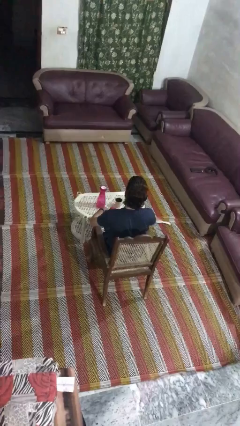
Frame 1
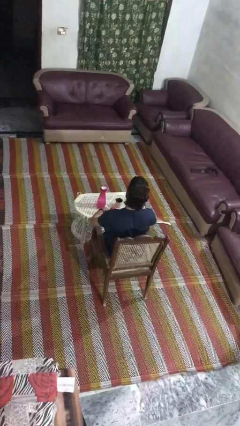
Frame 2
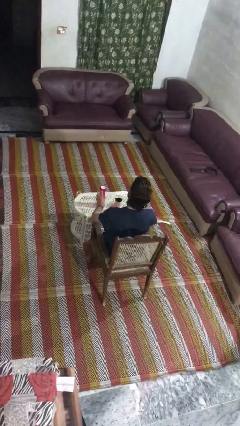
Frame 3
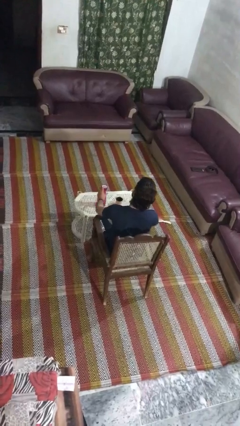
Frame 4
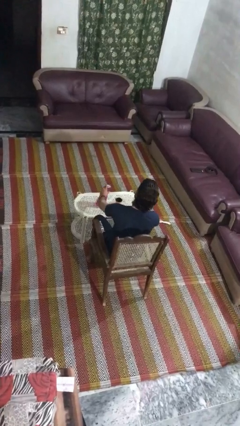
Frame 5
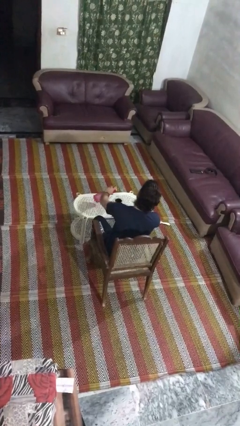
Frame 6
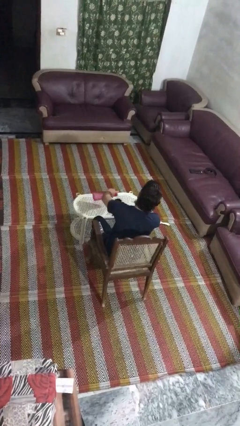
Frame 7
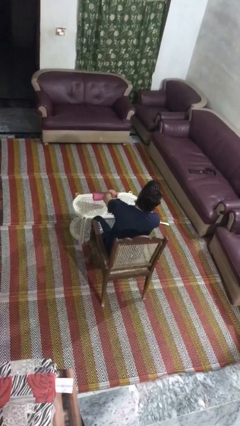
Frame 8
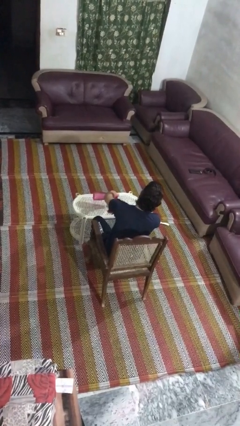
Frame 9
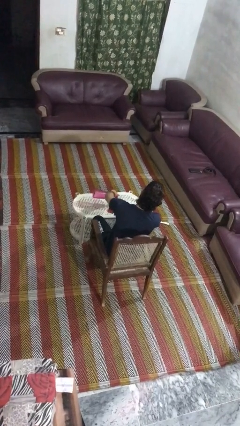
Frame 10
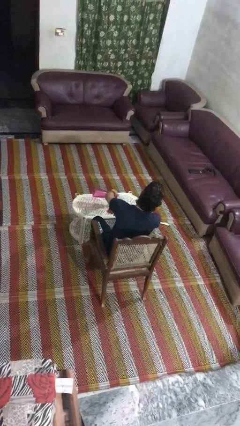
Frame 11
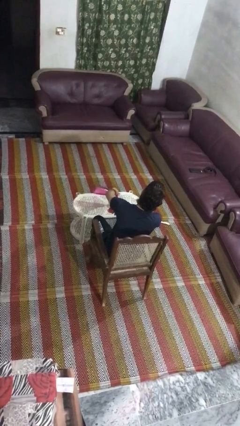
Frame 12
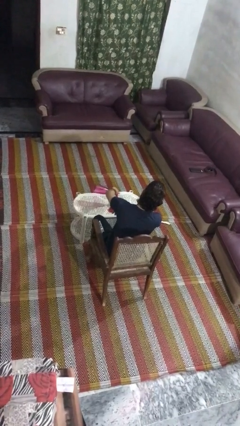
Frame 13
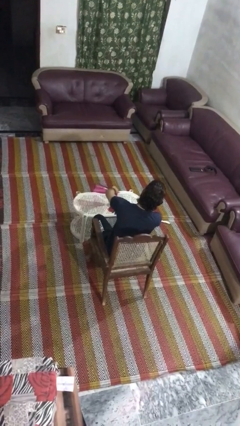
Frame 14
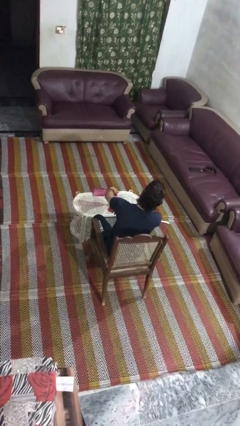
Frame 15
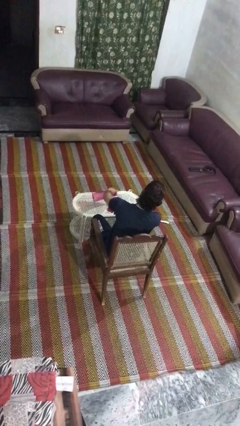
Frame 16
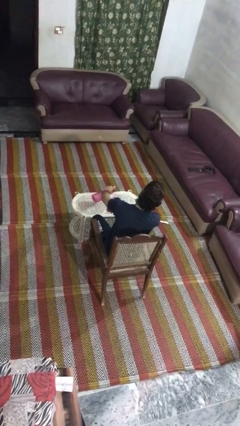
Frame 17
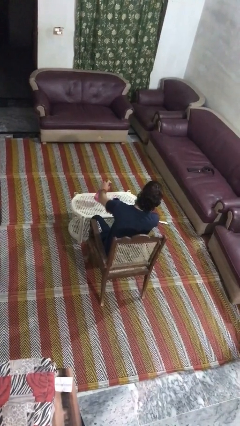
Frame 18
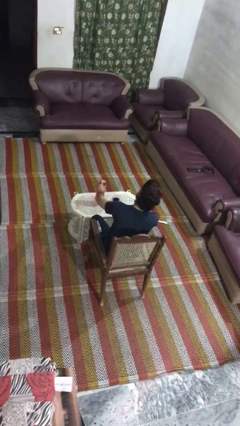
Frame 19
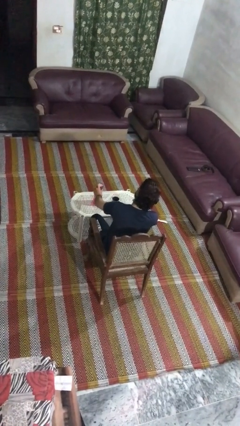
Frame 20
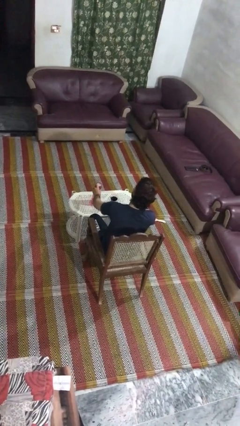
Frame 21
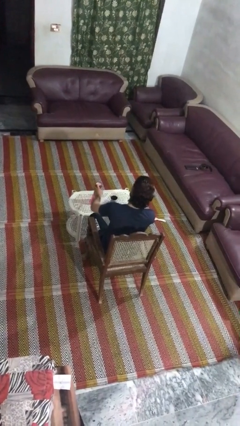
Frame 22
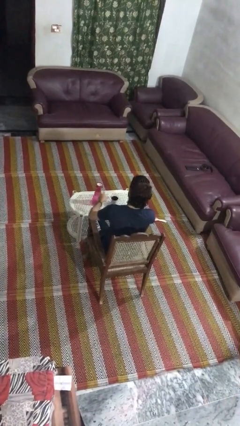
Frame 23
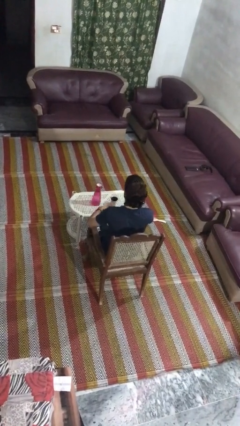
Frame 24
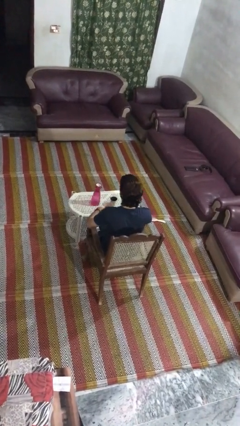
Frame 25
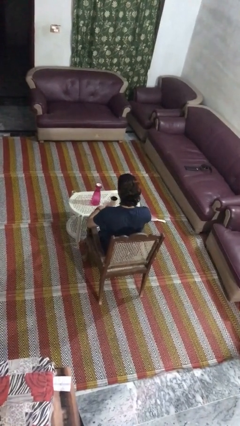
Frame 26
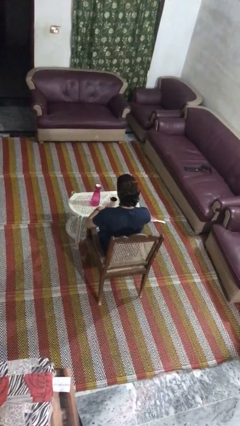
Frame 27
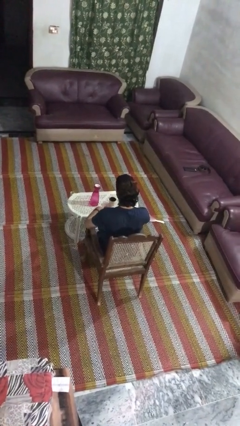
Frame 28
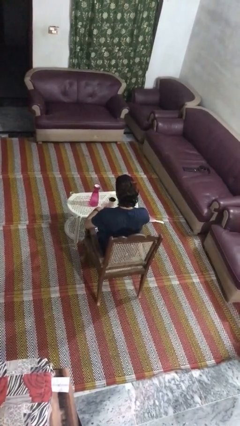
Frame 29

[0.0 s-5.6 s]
person pours liquid into cup

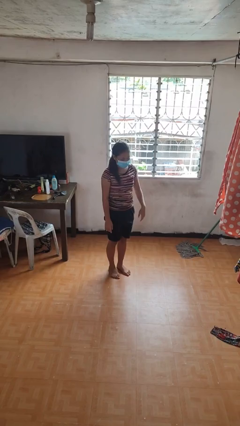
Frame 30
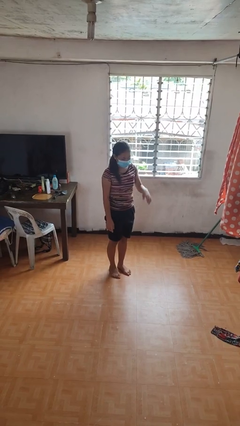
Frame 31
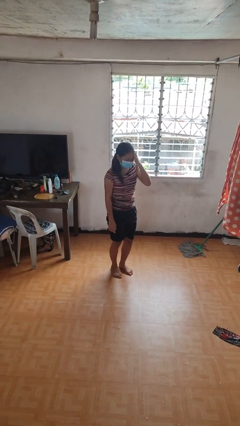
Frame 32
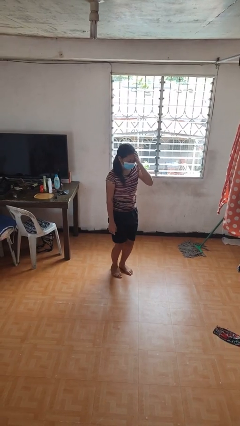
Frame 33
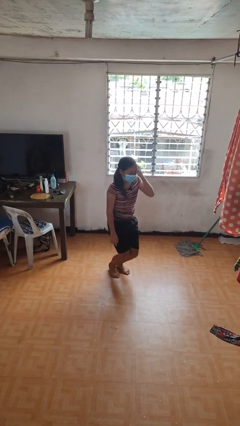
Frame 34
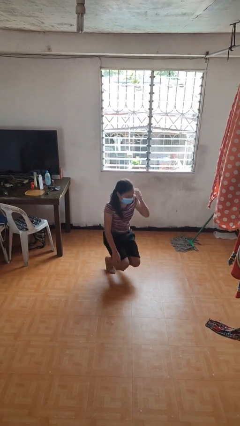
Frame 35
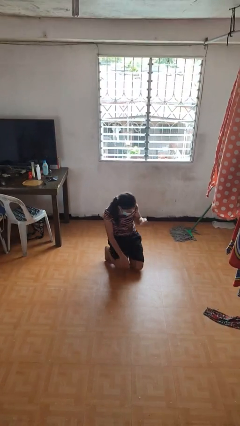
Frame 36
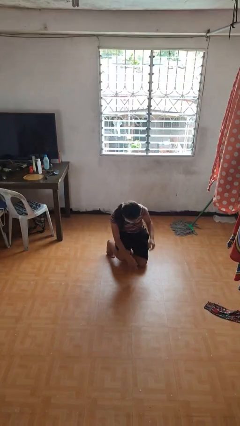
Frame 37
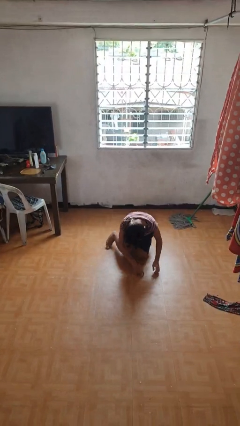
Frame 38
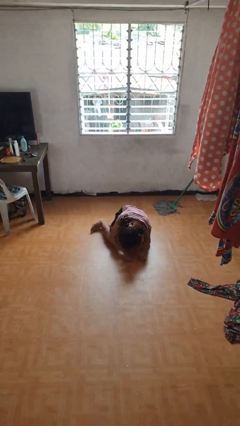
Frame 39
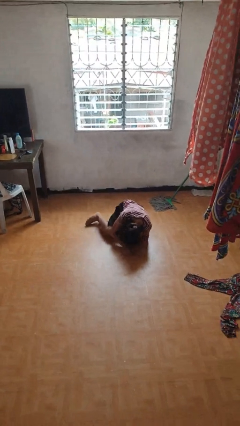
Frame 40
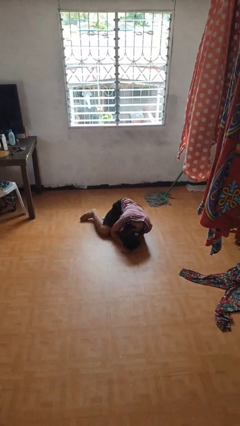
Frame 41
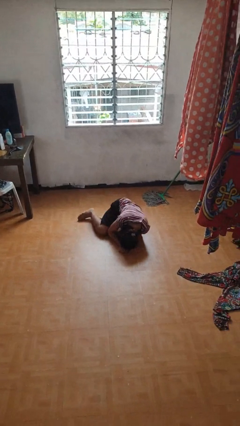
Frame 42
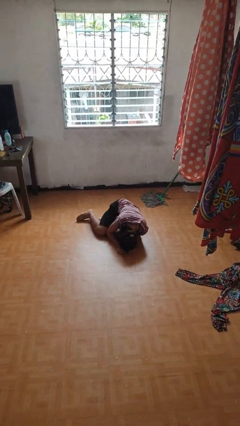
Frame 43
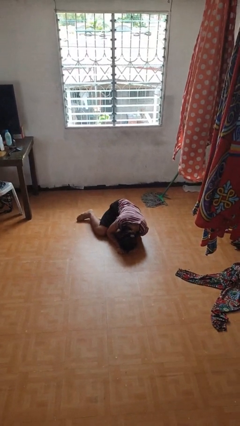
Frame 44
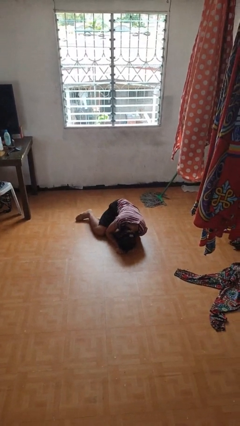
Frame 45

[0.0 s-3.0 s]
person falls while standing

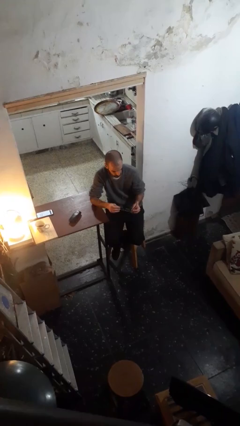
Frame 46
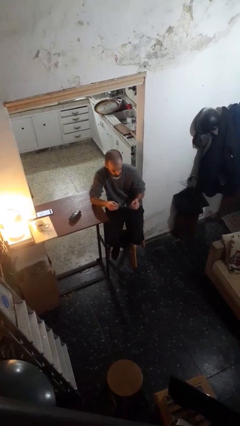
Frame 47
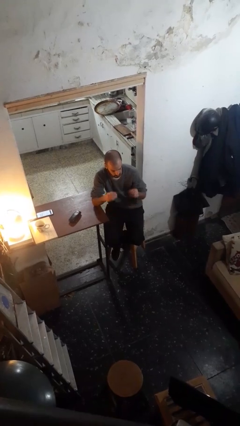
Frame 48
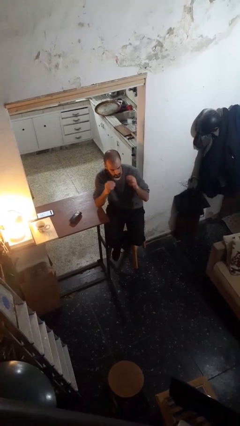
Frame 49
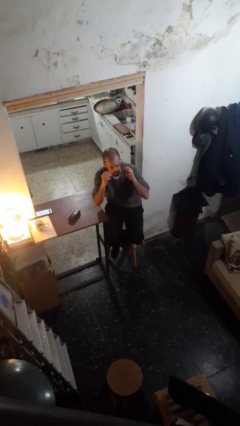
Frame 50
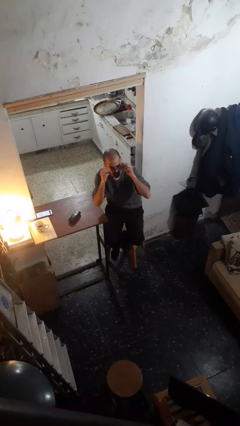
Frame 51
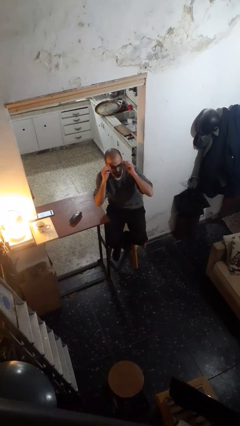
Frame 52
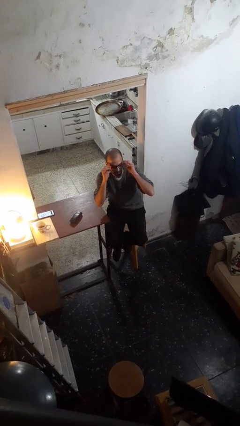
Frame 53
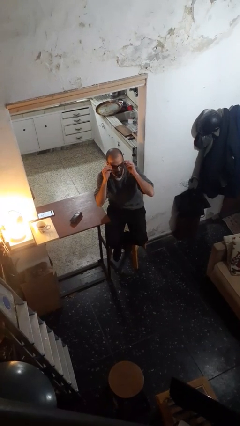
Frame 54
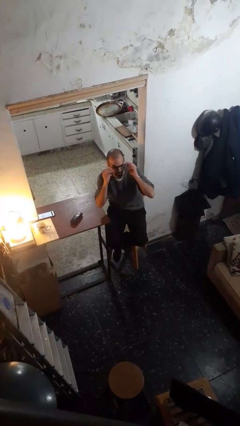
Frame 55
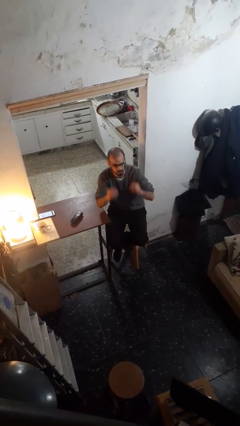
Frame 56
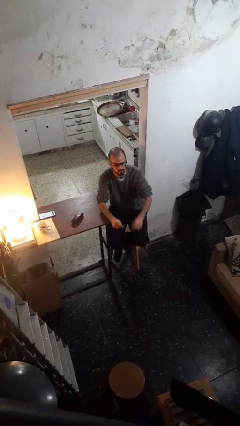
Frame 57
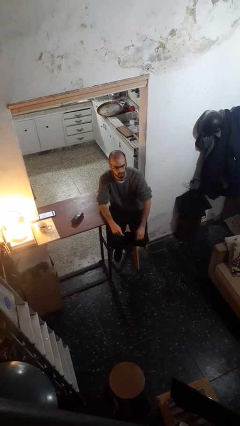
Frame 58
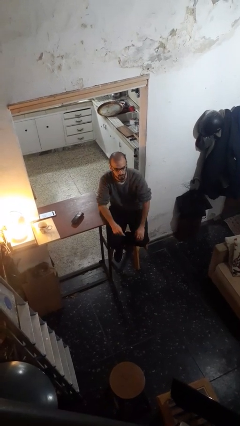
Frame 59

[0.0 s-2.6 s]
person puts on glasses

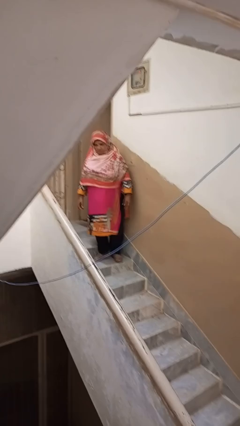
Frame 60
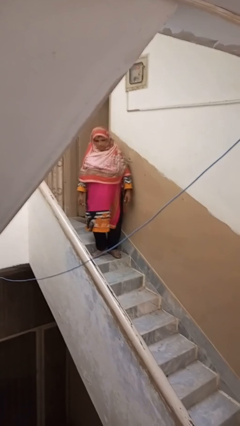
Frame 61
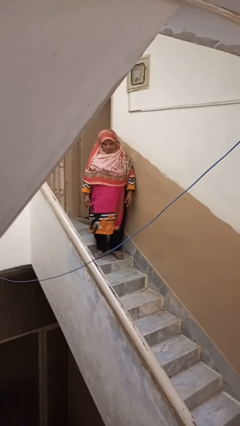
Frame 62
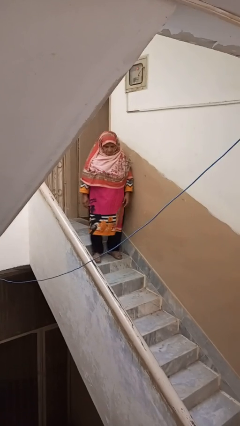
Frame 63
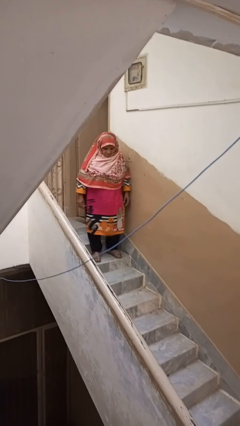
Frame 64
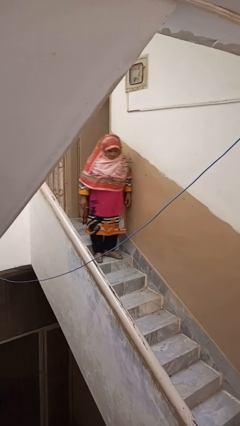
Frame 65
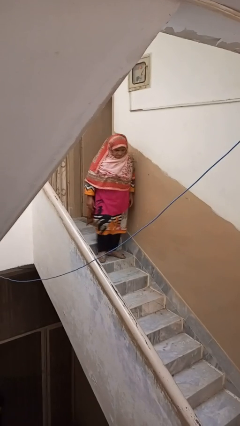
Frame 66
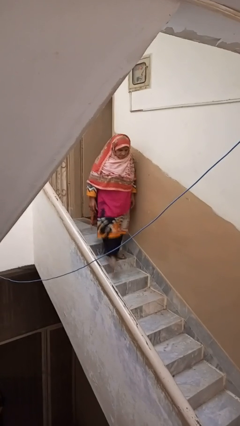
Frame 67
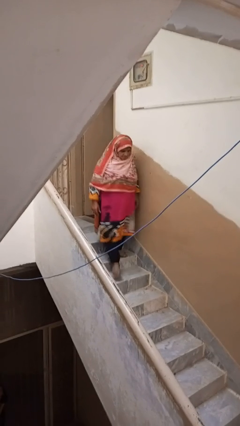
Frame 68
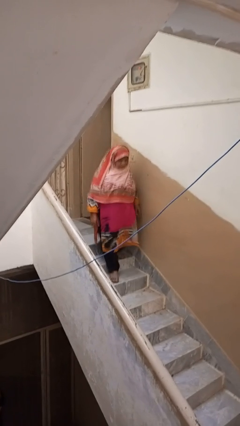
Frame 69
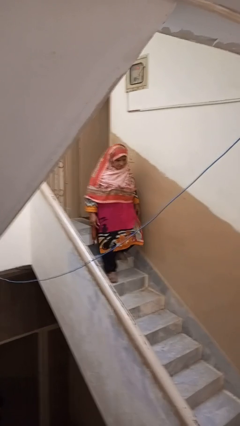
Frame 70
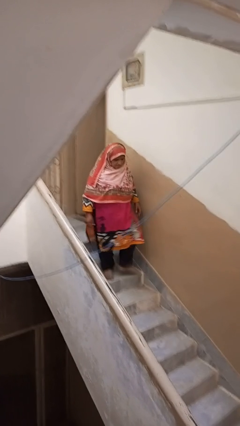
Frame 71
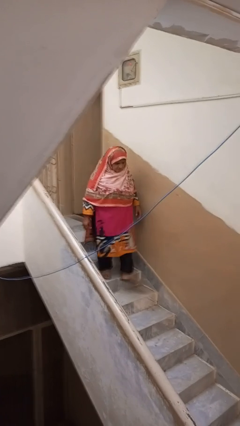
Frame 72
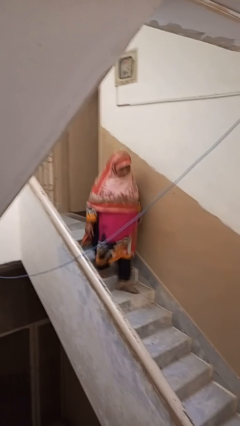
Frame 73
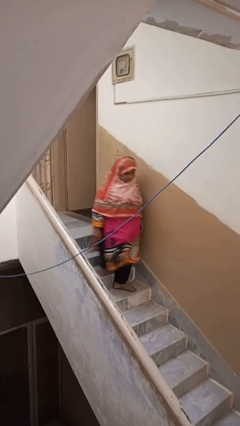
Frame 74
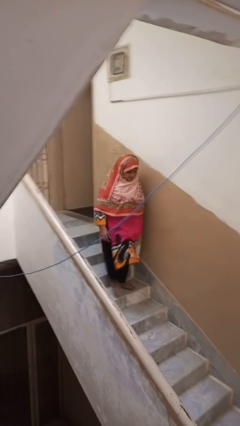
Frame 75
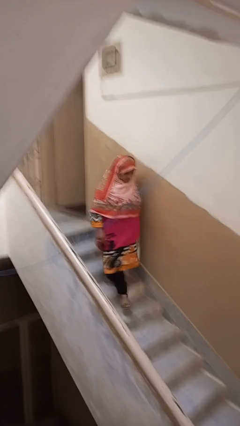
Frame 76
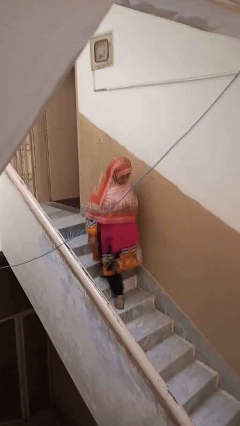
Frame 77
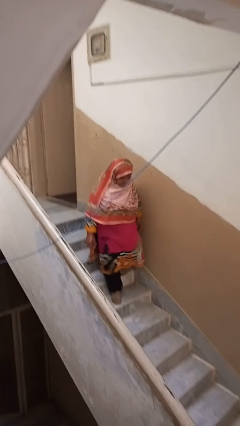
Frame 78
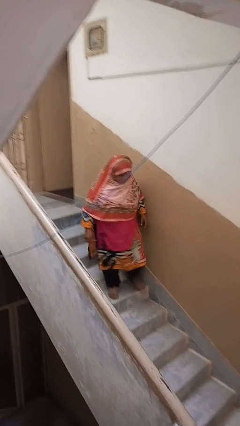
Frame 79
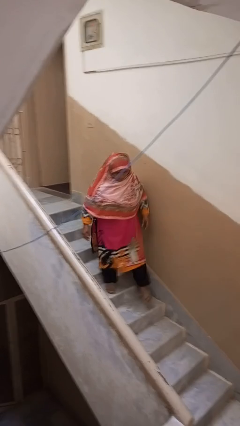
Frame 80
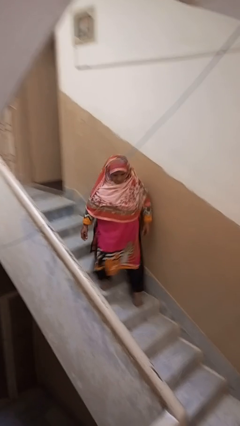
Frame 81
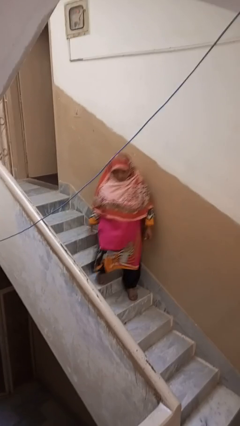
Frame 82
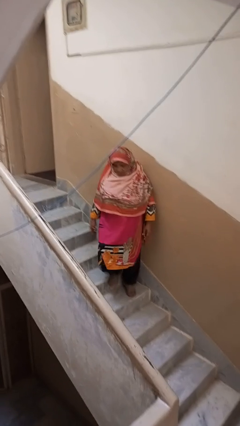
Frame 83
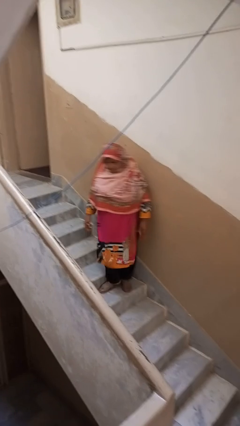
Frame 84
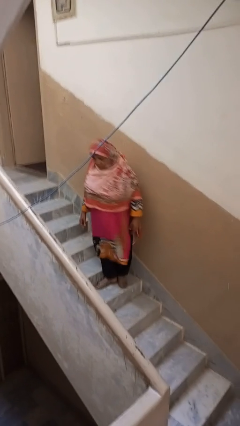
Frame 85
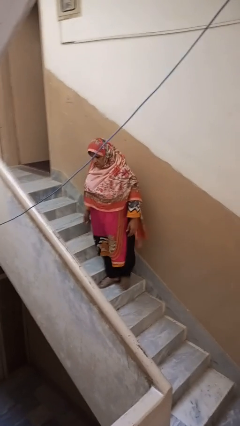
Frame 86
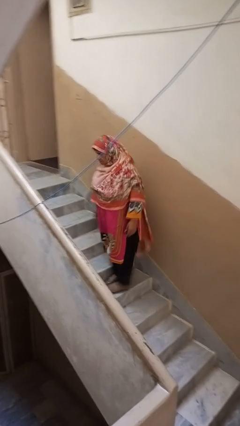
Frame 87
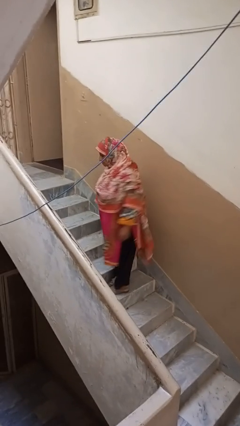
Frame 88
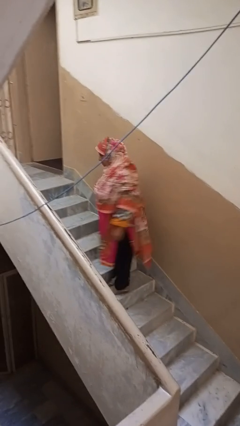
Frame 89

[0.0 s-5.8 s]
person climbs down stairs

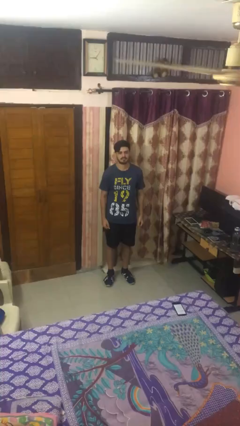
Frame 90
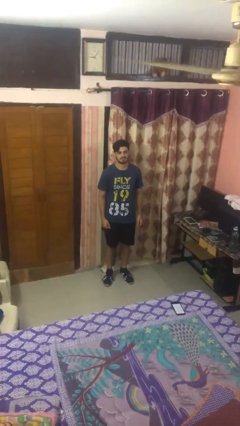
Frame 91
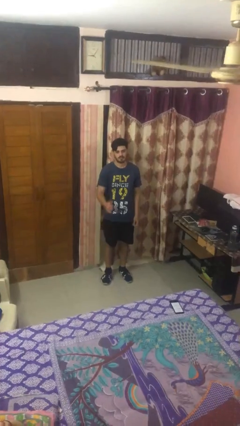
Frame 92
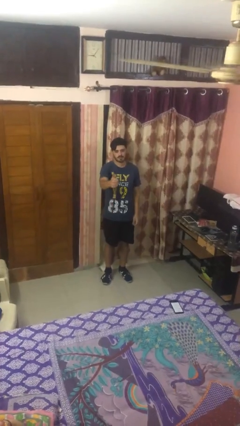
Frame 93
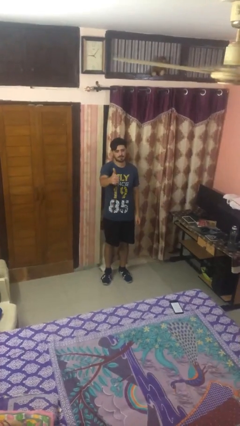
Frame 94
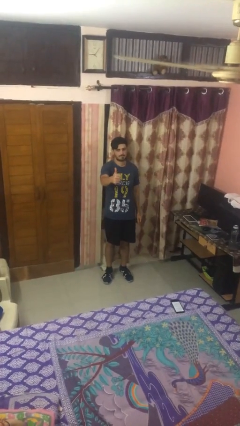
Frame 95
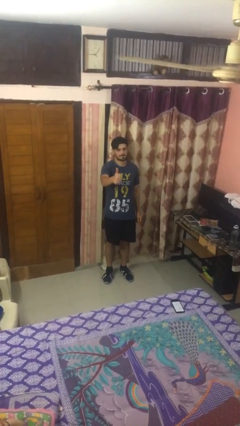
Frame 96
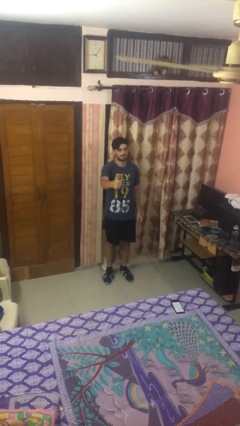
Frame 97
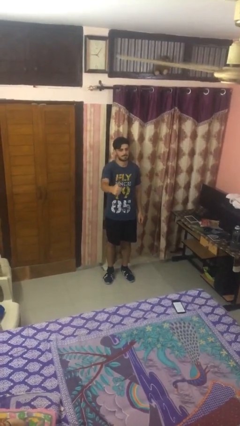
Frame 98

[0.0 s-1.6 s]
person gestures thumbs up
